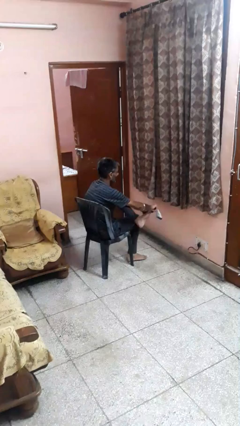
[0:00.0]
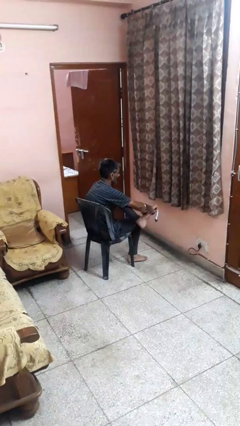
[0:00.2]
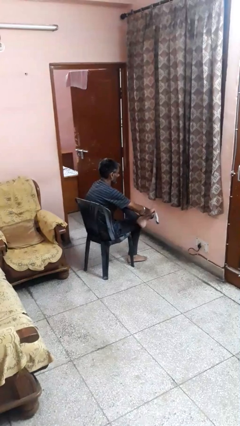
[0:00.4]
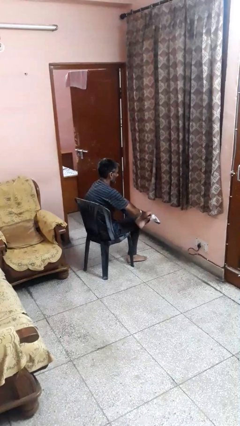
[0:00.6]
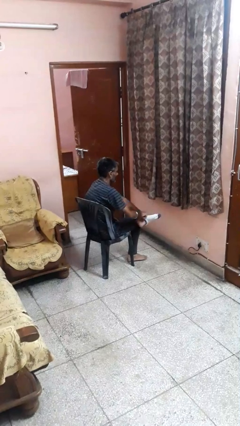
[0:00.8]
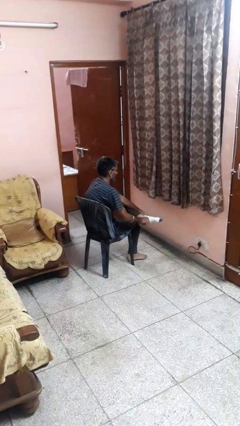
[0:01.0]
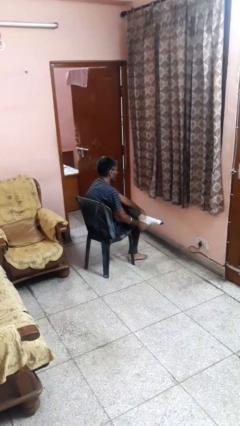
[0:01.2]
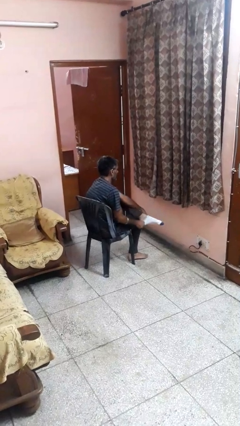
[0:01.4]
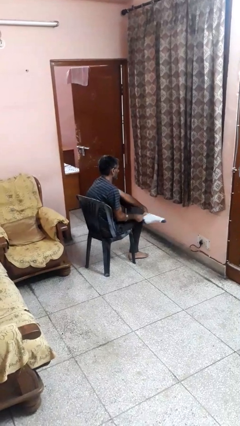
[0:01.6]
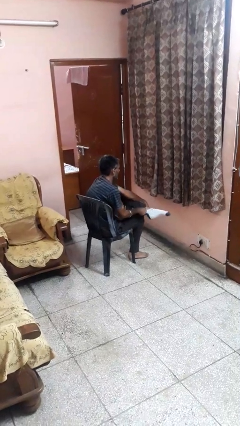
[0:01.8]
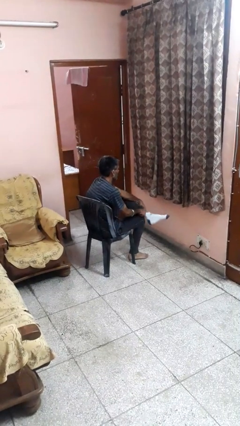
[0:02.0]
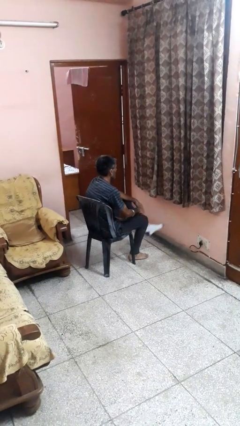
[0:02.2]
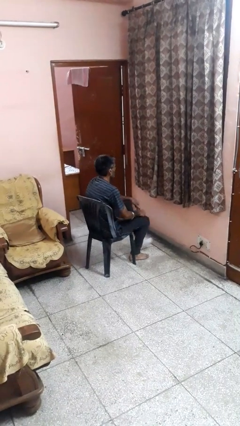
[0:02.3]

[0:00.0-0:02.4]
person puts on socks

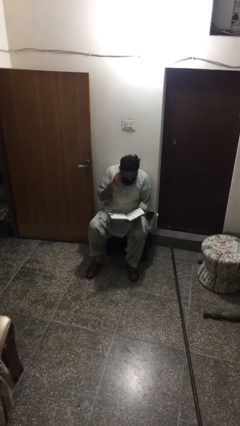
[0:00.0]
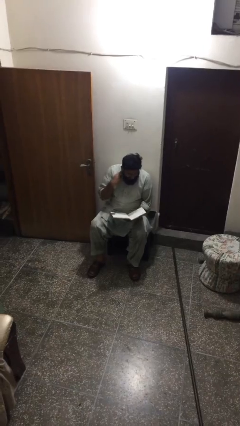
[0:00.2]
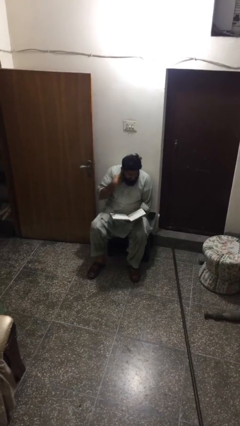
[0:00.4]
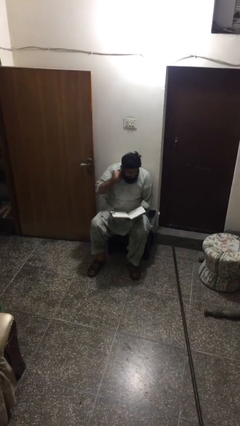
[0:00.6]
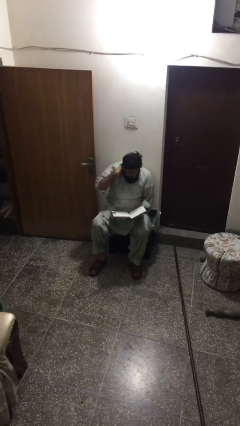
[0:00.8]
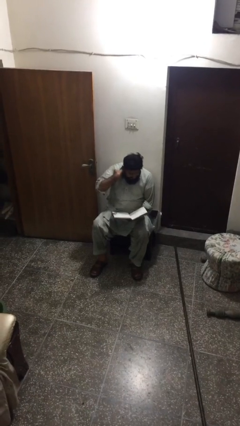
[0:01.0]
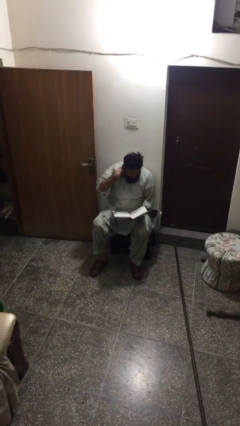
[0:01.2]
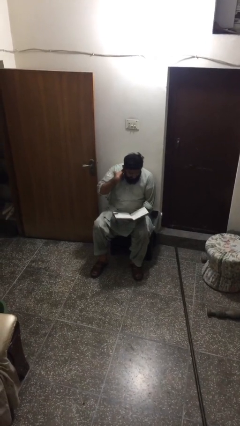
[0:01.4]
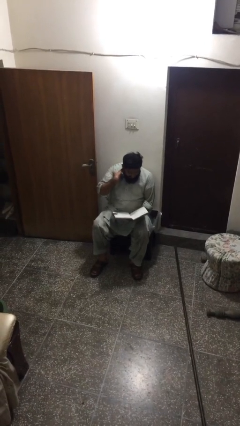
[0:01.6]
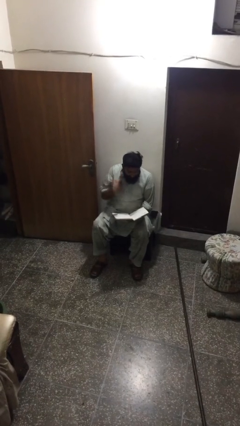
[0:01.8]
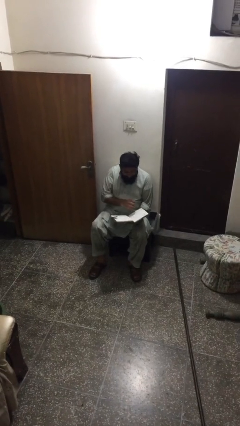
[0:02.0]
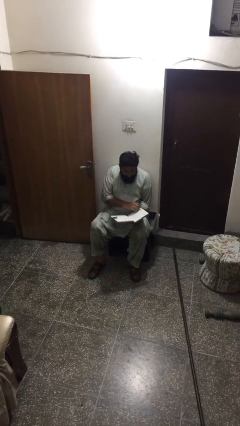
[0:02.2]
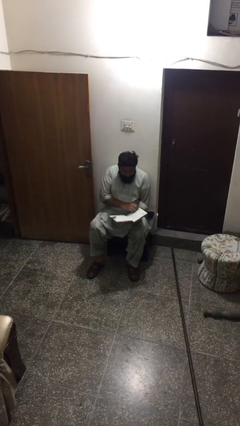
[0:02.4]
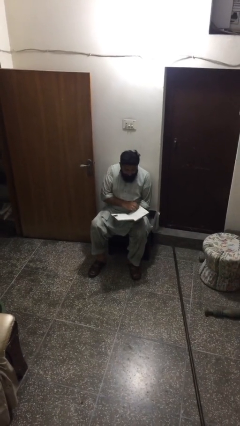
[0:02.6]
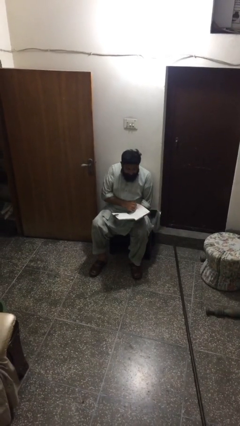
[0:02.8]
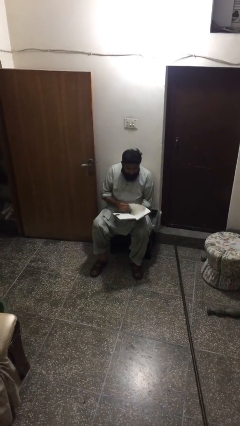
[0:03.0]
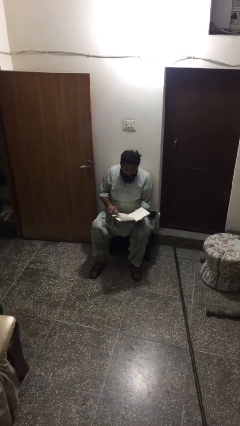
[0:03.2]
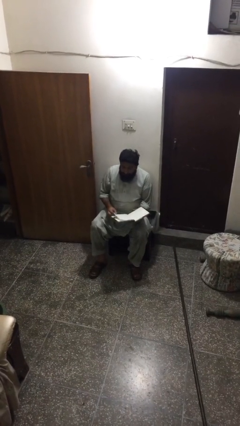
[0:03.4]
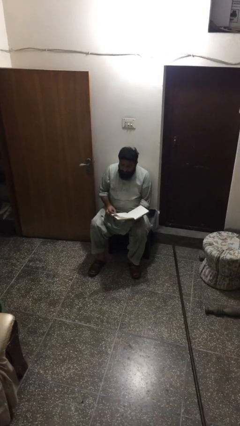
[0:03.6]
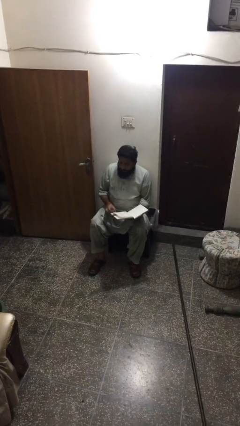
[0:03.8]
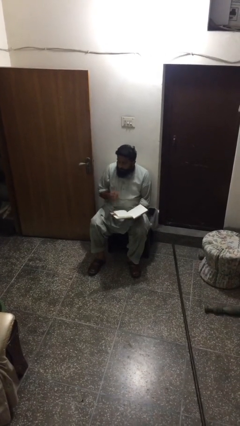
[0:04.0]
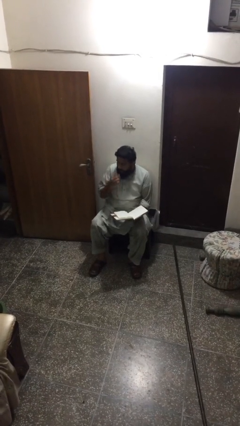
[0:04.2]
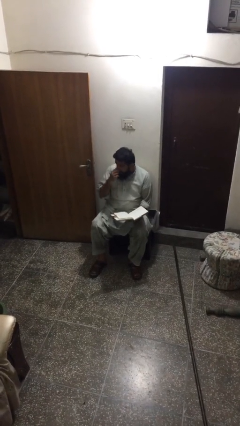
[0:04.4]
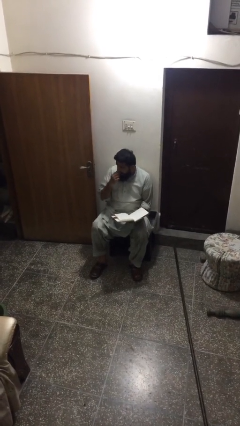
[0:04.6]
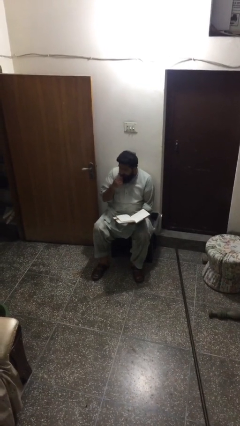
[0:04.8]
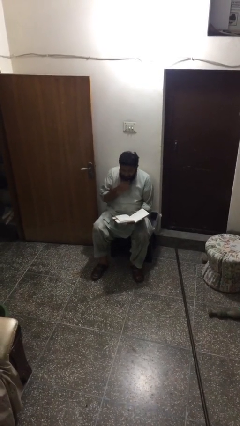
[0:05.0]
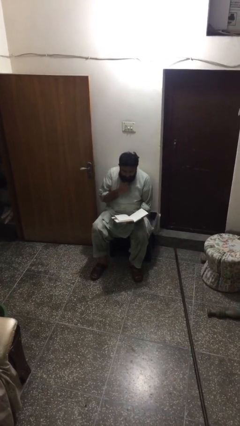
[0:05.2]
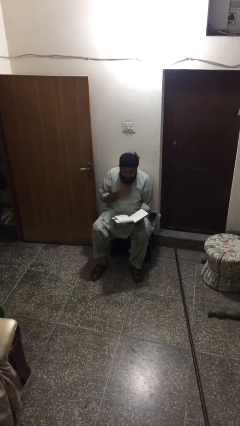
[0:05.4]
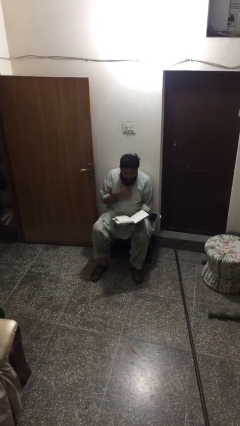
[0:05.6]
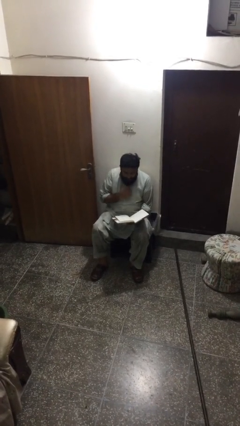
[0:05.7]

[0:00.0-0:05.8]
person reads document

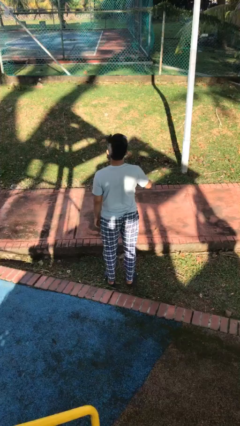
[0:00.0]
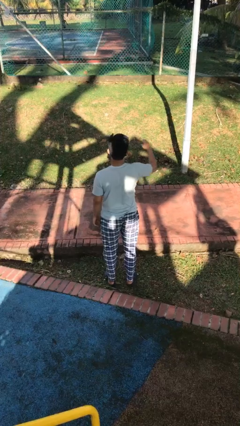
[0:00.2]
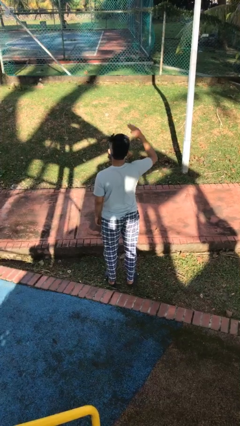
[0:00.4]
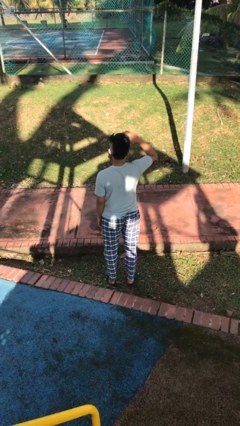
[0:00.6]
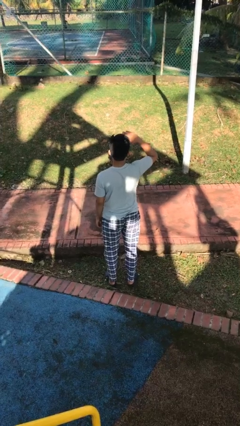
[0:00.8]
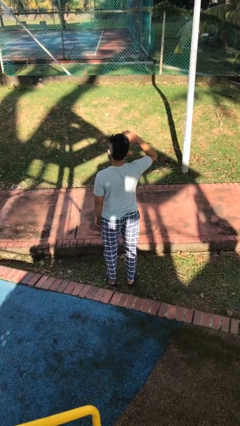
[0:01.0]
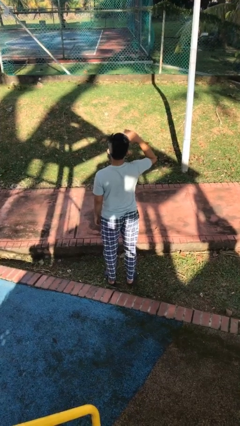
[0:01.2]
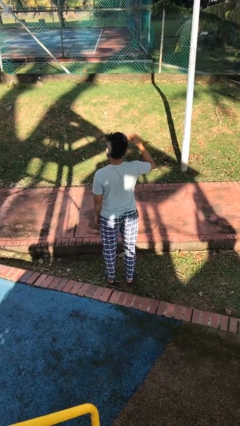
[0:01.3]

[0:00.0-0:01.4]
person salutes

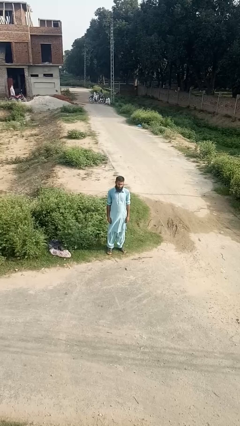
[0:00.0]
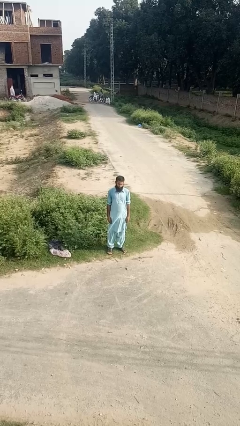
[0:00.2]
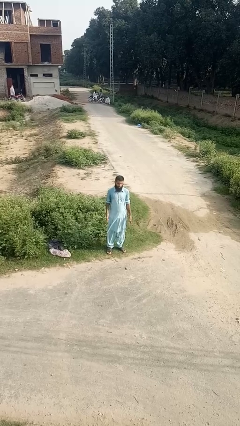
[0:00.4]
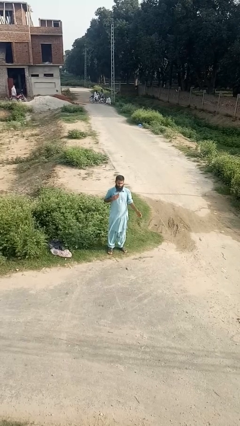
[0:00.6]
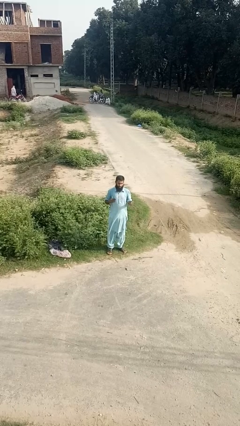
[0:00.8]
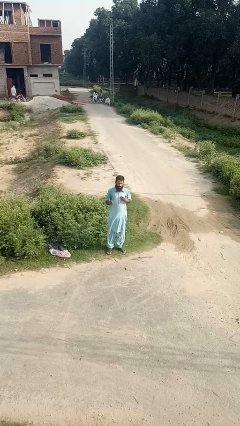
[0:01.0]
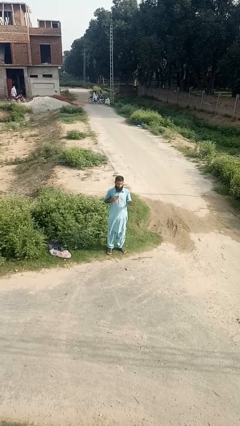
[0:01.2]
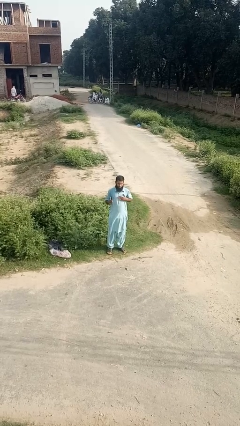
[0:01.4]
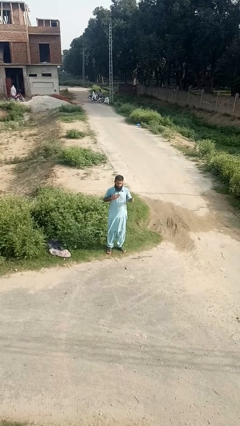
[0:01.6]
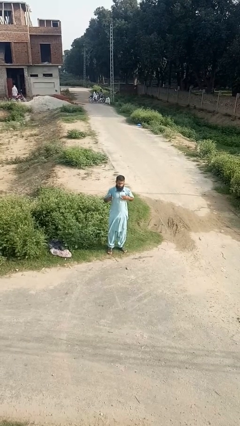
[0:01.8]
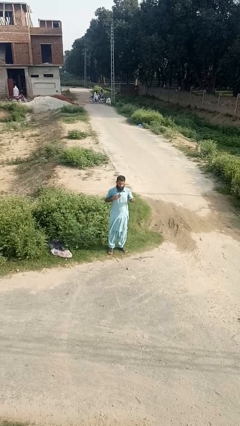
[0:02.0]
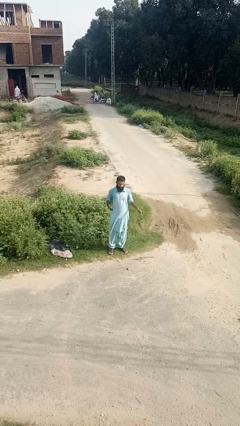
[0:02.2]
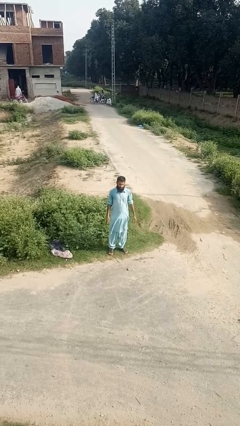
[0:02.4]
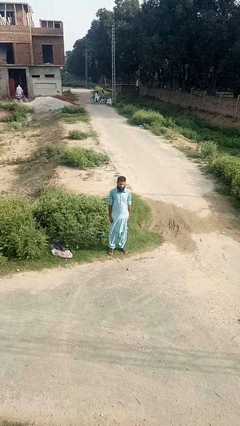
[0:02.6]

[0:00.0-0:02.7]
person drums on chest

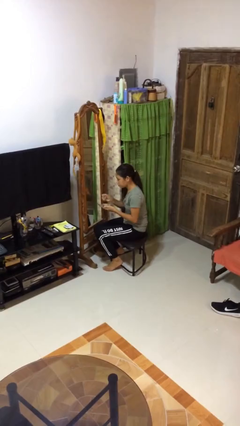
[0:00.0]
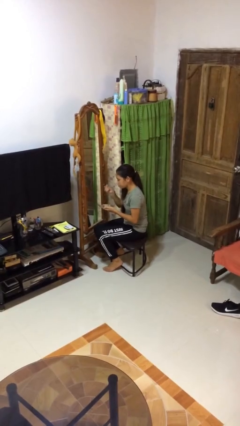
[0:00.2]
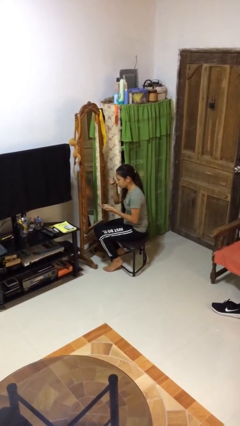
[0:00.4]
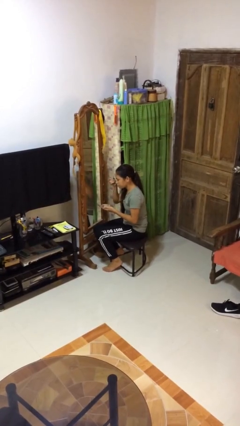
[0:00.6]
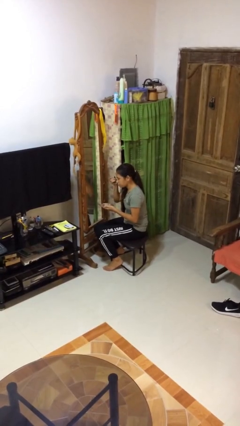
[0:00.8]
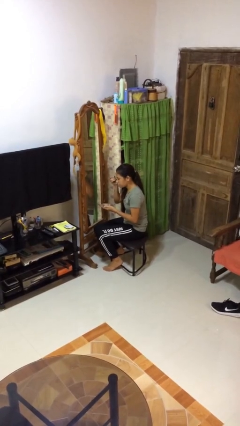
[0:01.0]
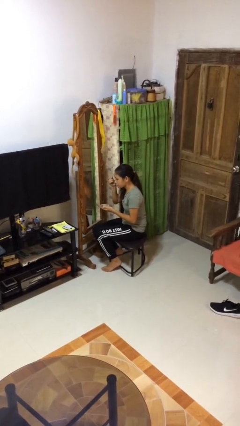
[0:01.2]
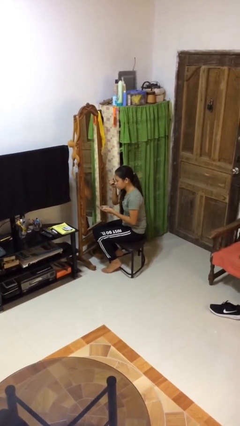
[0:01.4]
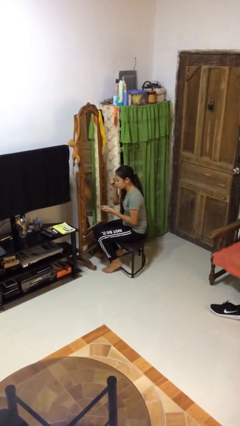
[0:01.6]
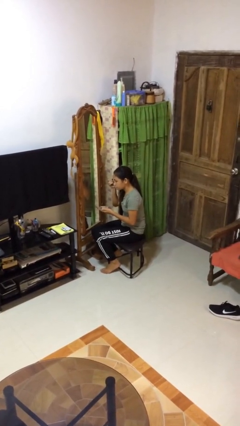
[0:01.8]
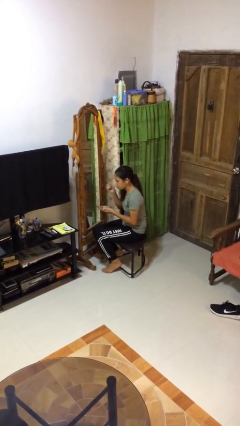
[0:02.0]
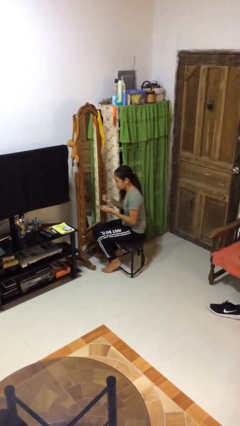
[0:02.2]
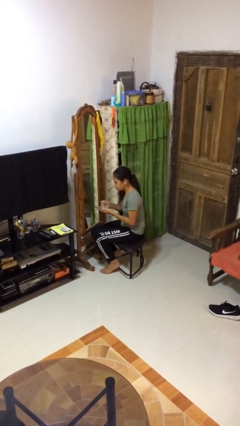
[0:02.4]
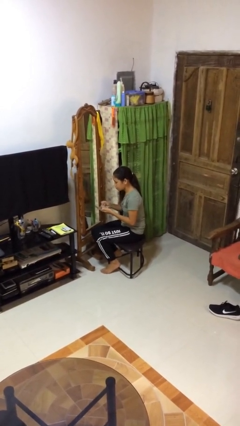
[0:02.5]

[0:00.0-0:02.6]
person applies eye makeup

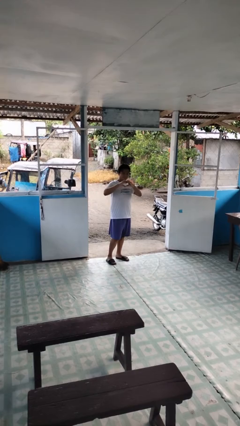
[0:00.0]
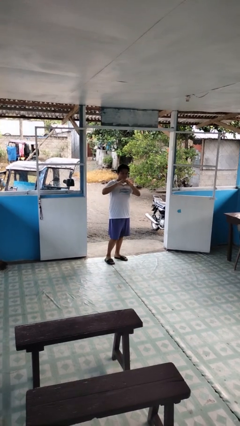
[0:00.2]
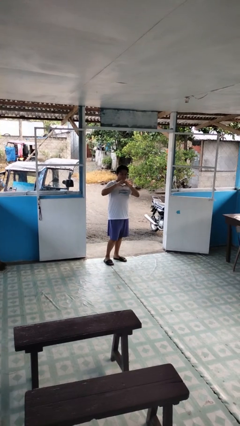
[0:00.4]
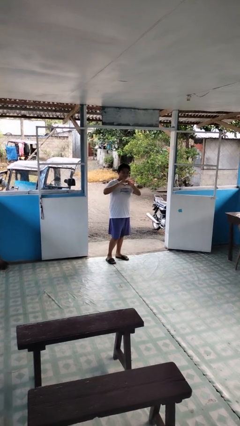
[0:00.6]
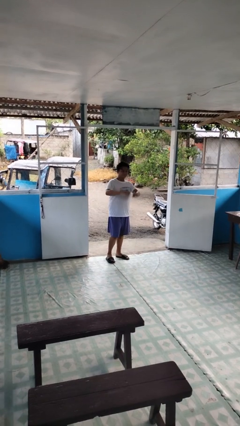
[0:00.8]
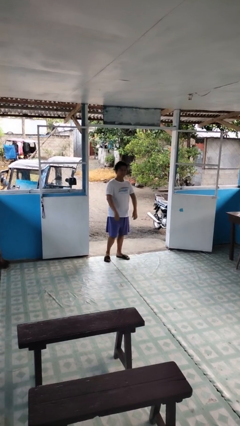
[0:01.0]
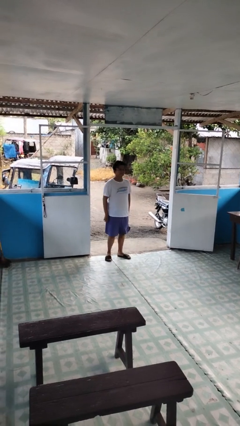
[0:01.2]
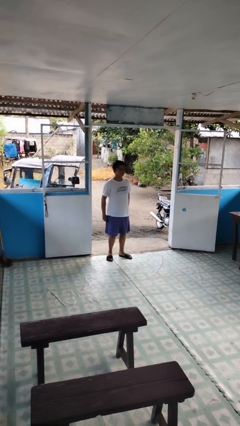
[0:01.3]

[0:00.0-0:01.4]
person gestures heart

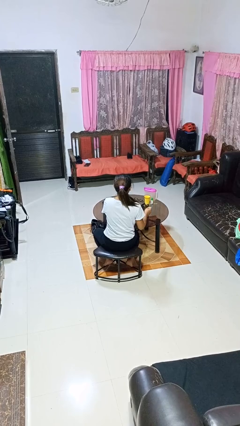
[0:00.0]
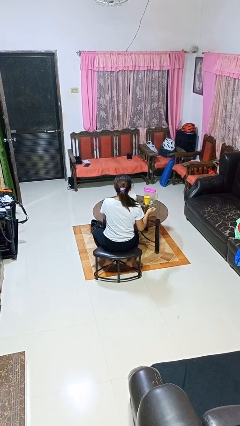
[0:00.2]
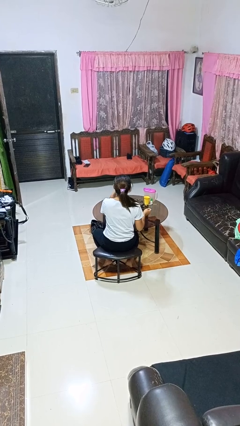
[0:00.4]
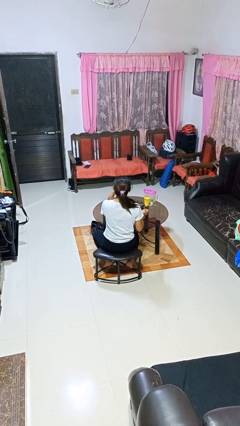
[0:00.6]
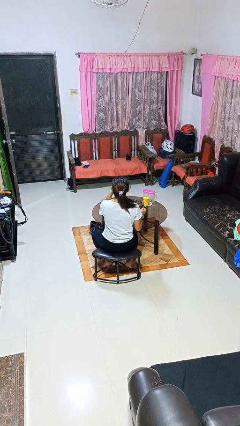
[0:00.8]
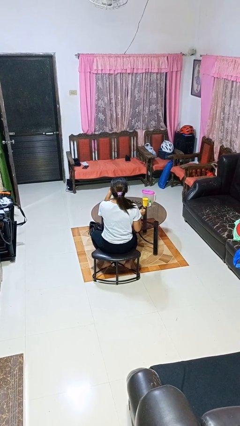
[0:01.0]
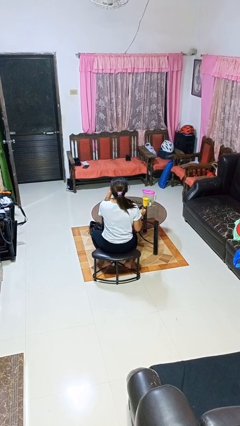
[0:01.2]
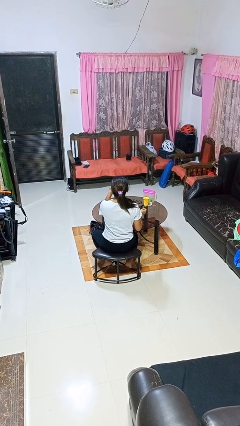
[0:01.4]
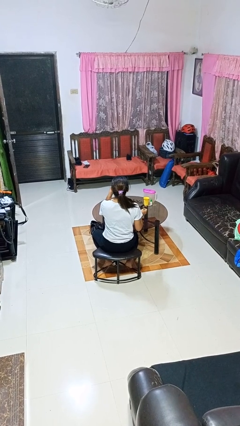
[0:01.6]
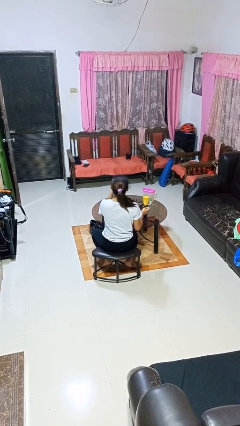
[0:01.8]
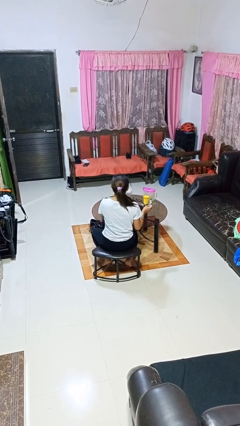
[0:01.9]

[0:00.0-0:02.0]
person drinks from mug
